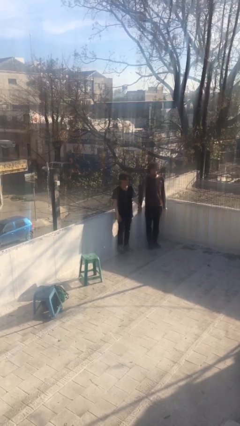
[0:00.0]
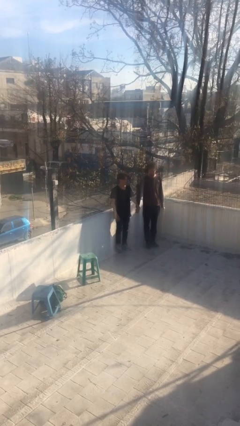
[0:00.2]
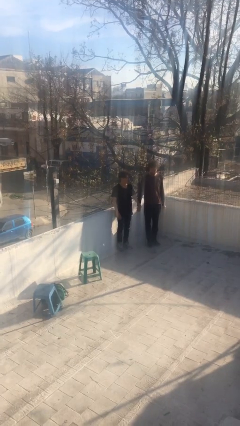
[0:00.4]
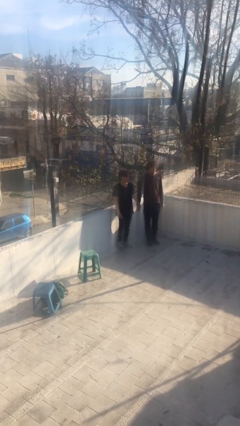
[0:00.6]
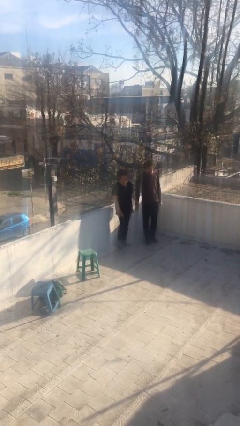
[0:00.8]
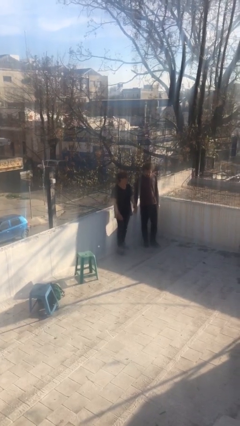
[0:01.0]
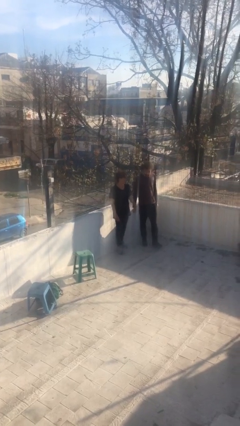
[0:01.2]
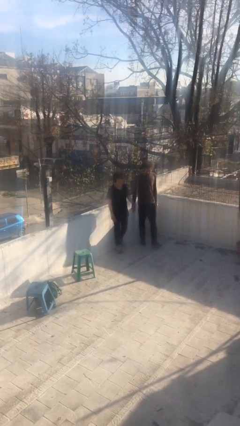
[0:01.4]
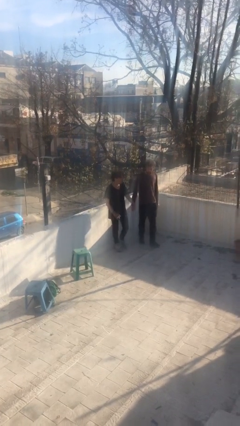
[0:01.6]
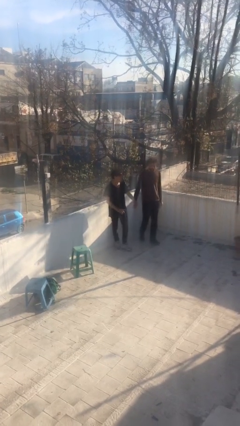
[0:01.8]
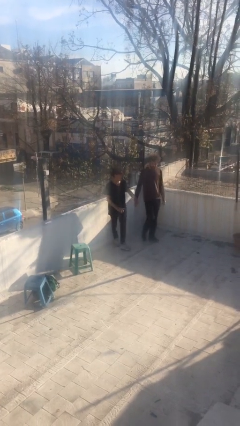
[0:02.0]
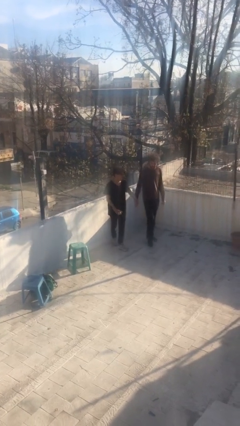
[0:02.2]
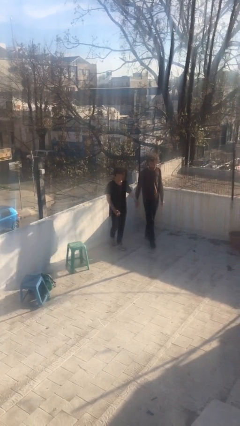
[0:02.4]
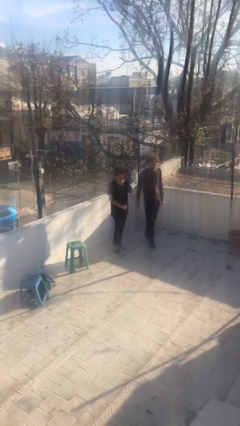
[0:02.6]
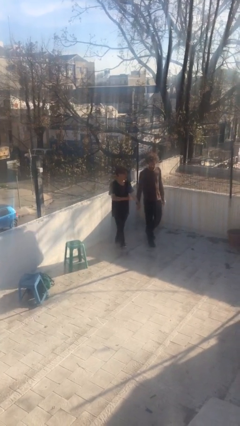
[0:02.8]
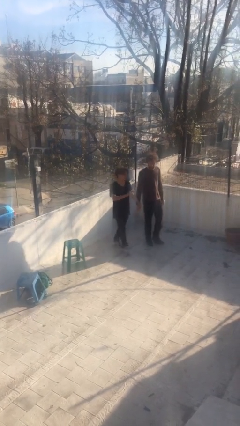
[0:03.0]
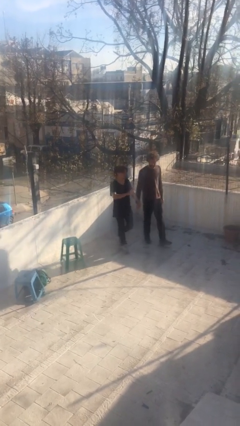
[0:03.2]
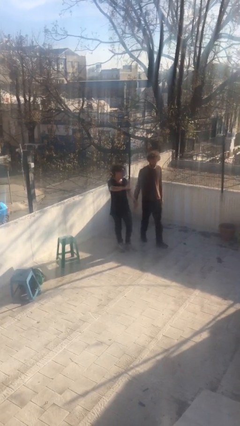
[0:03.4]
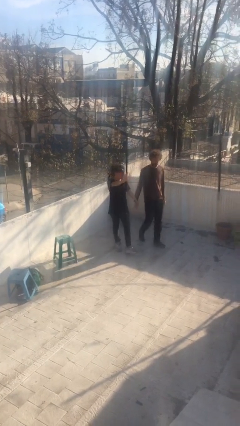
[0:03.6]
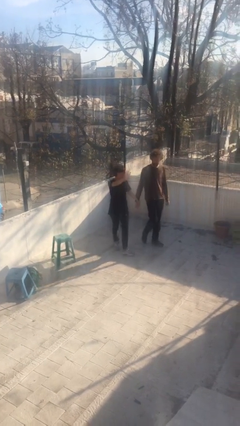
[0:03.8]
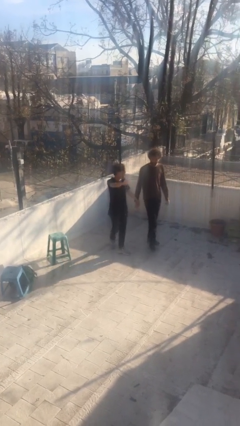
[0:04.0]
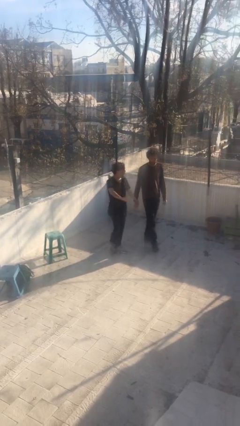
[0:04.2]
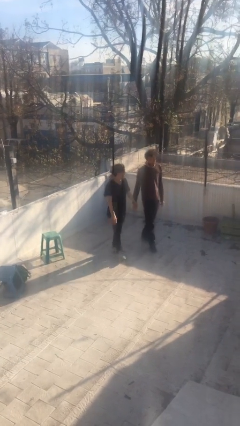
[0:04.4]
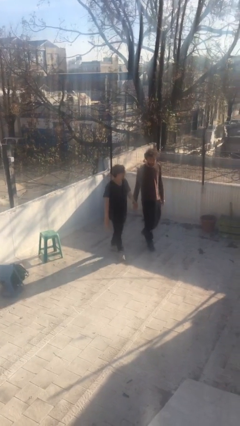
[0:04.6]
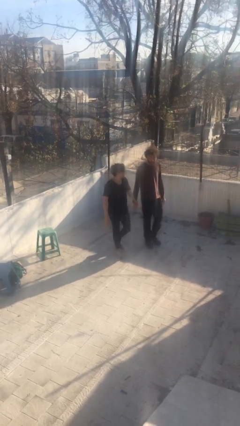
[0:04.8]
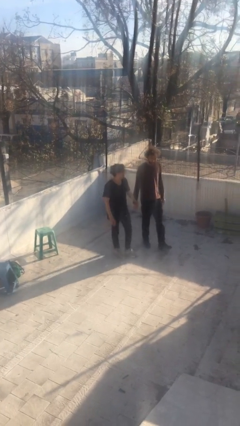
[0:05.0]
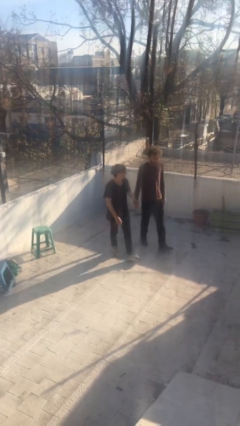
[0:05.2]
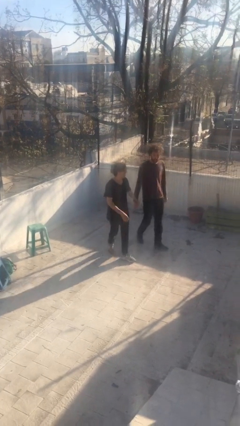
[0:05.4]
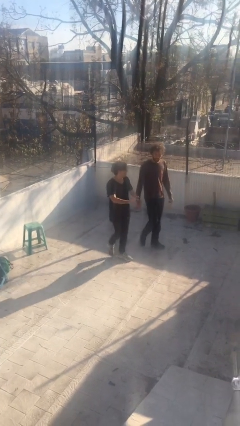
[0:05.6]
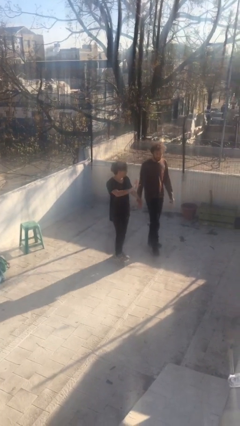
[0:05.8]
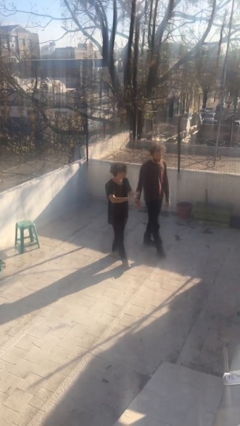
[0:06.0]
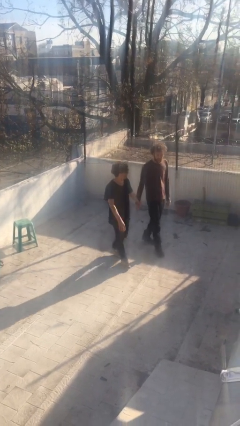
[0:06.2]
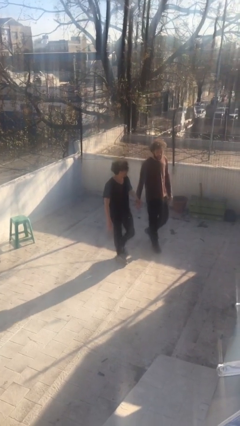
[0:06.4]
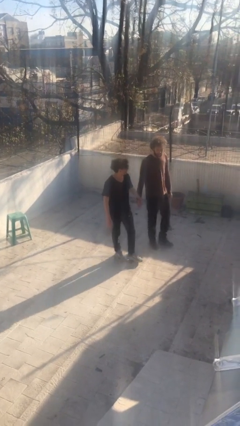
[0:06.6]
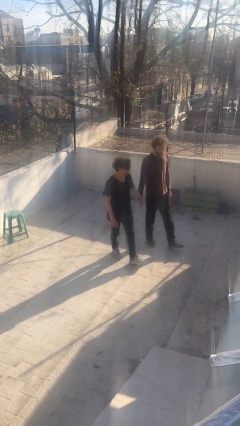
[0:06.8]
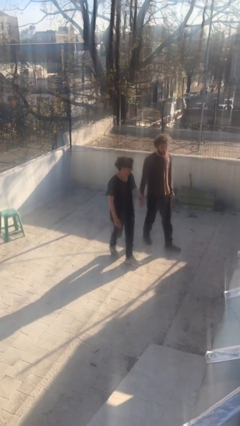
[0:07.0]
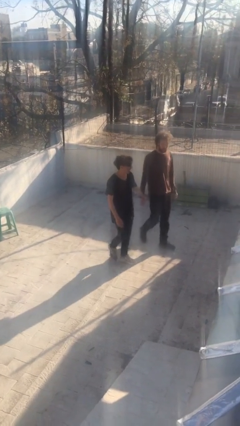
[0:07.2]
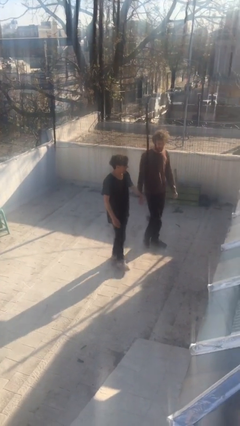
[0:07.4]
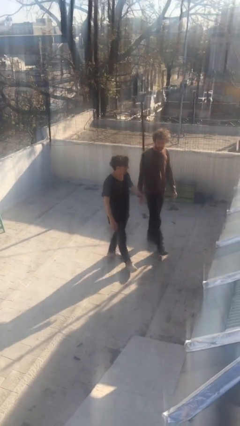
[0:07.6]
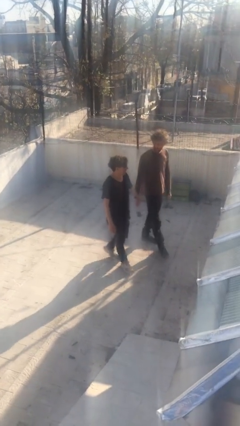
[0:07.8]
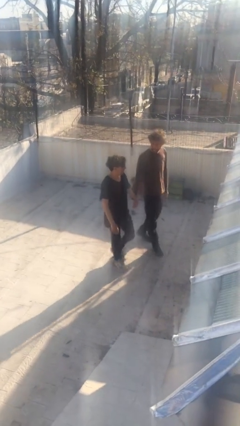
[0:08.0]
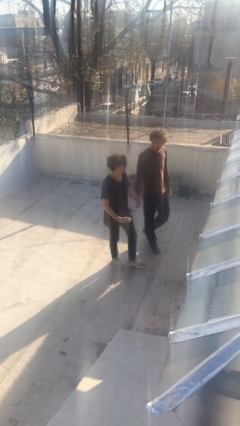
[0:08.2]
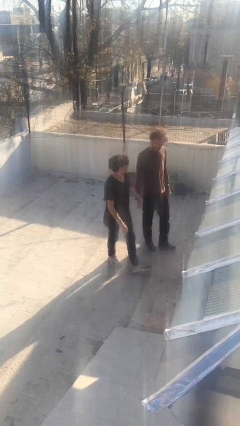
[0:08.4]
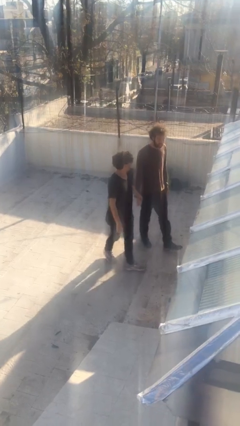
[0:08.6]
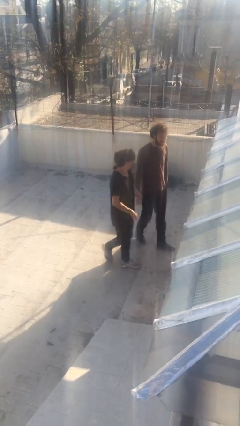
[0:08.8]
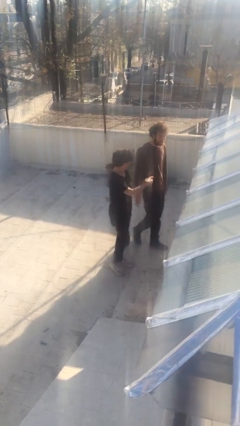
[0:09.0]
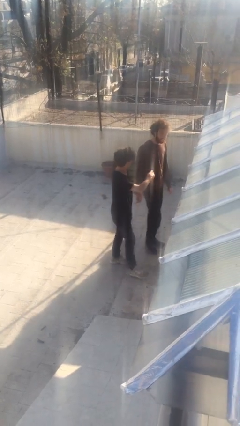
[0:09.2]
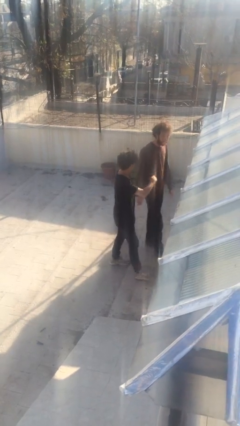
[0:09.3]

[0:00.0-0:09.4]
person holds hand

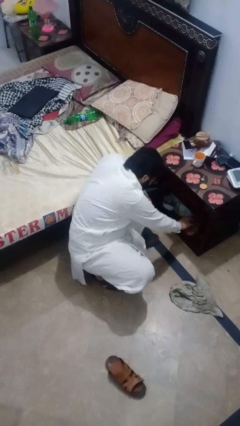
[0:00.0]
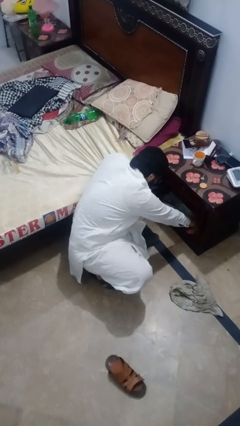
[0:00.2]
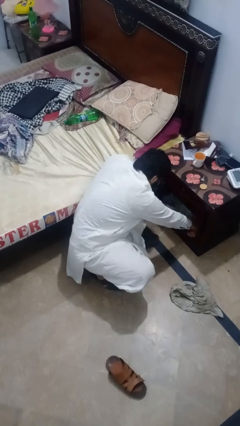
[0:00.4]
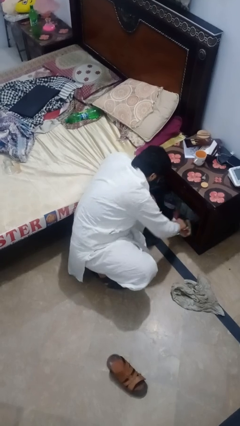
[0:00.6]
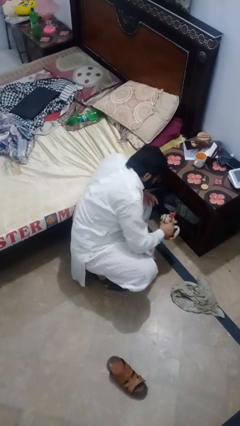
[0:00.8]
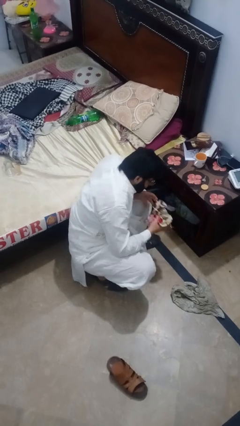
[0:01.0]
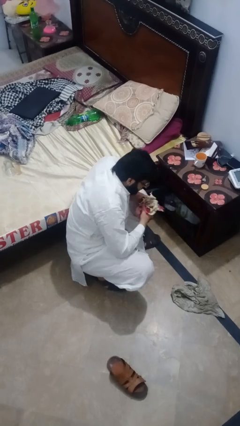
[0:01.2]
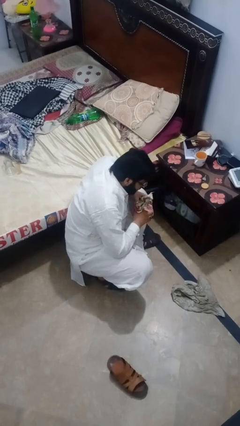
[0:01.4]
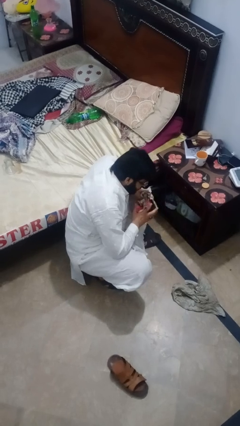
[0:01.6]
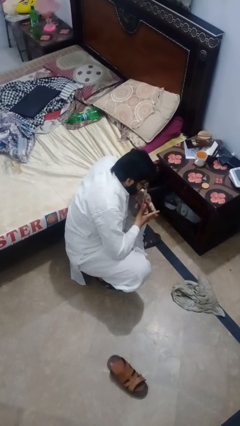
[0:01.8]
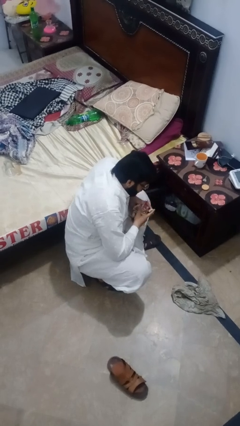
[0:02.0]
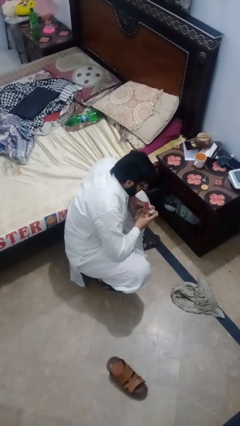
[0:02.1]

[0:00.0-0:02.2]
person picks up object from cabinet

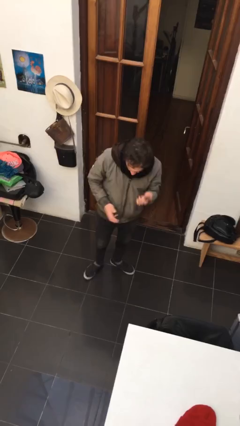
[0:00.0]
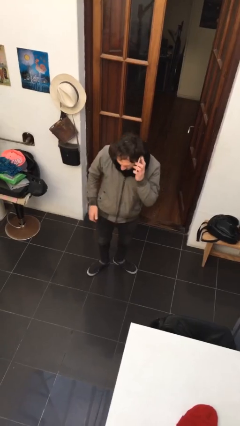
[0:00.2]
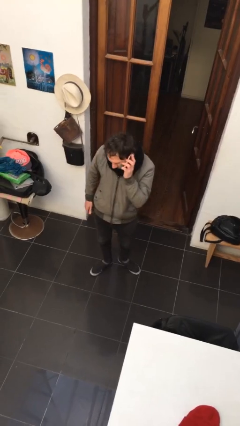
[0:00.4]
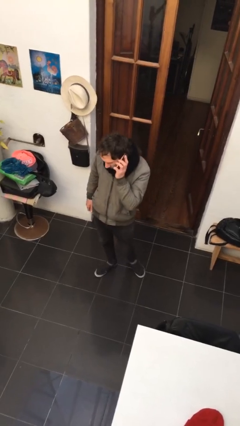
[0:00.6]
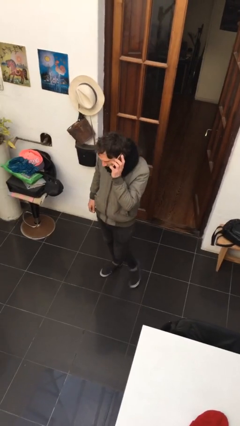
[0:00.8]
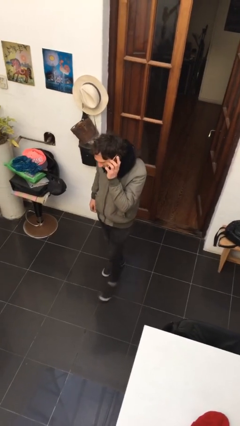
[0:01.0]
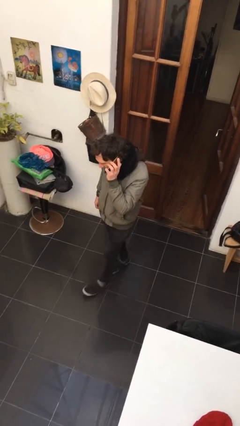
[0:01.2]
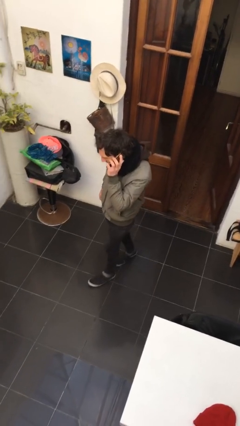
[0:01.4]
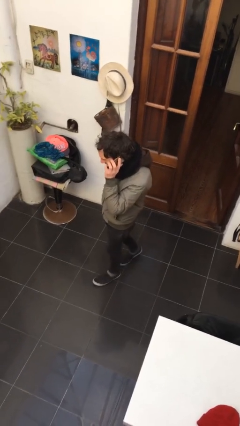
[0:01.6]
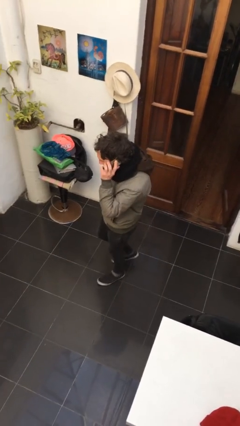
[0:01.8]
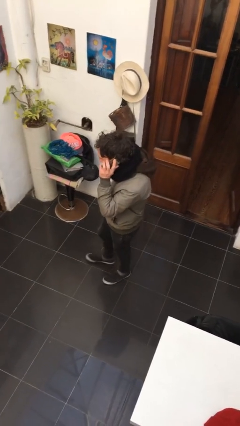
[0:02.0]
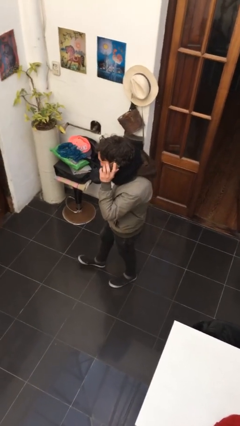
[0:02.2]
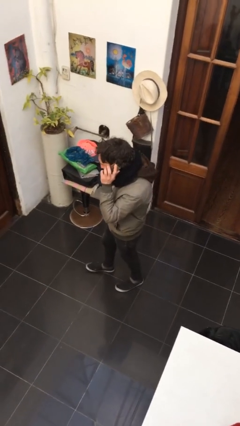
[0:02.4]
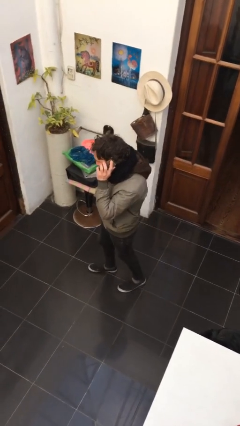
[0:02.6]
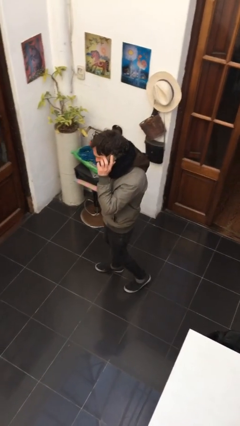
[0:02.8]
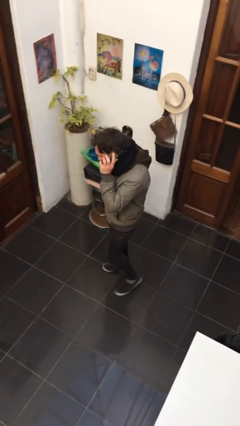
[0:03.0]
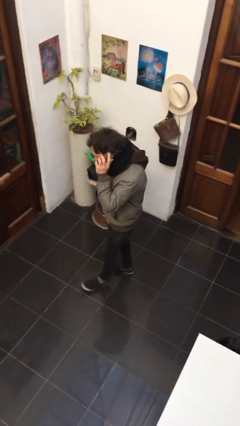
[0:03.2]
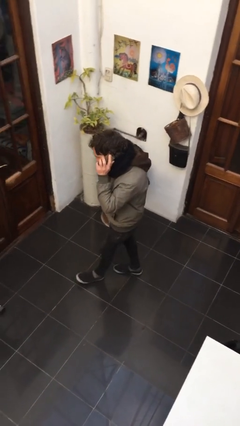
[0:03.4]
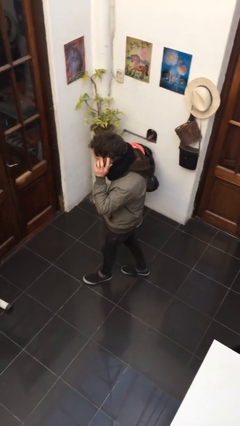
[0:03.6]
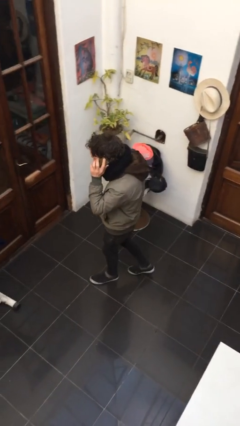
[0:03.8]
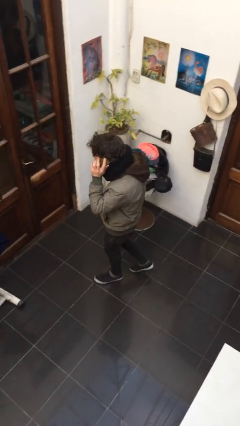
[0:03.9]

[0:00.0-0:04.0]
person talks on phone

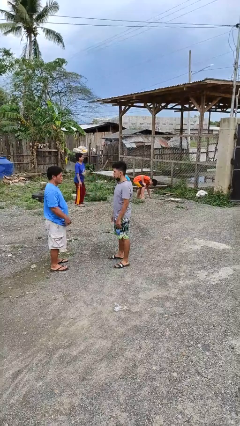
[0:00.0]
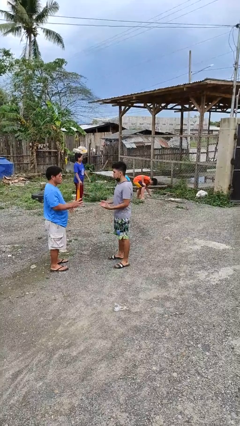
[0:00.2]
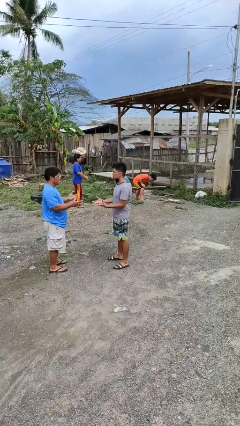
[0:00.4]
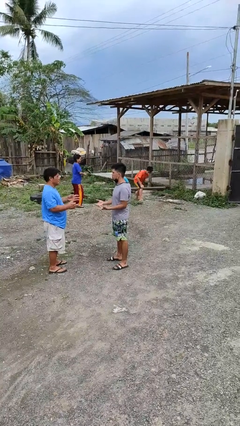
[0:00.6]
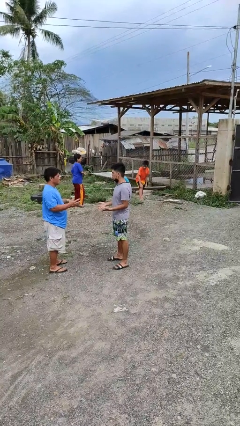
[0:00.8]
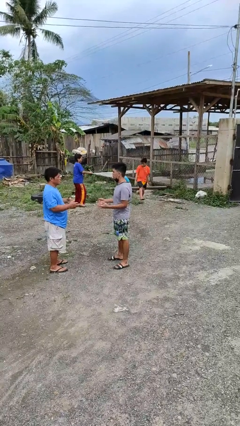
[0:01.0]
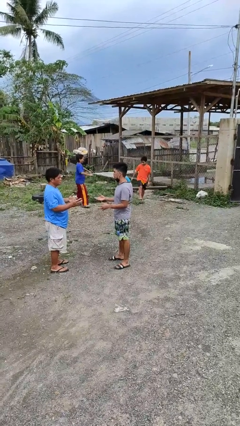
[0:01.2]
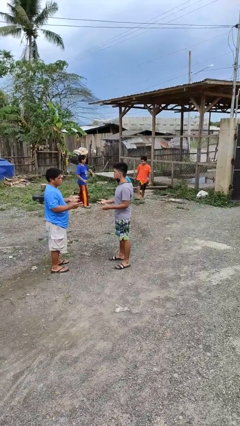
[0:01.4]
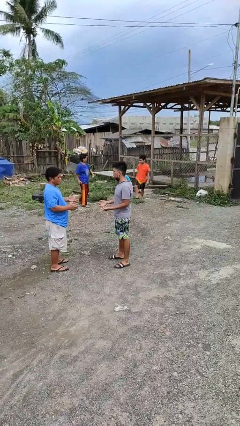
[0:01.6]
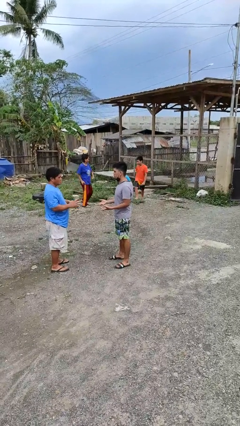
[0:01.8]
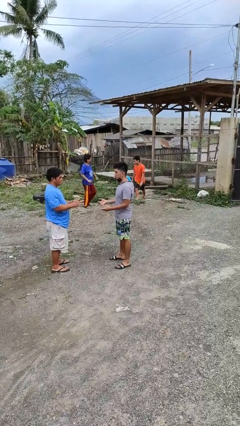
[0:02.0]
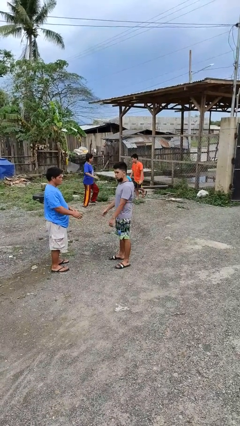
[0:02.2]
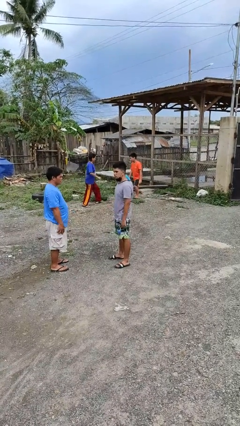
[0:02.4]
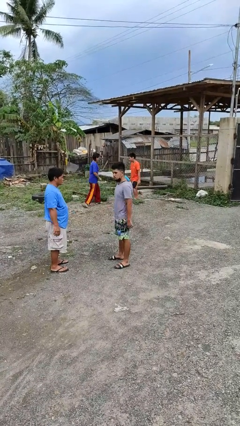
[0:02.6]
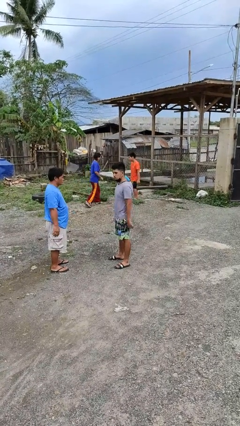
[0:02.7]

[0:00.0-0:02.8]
person talks to person
